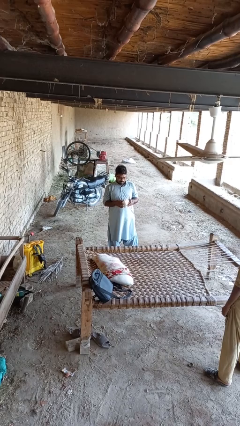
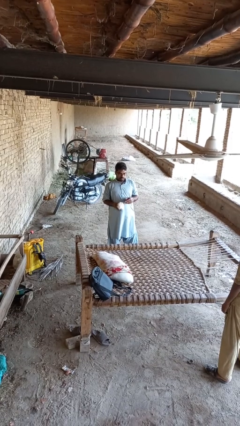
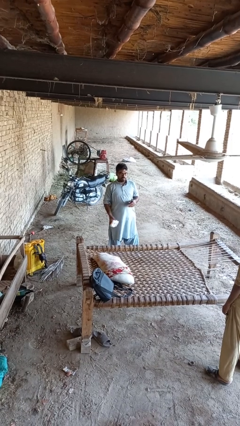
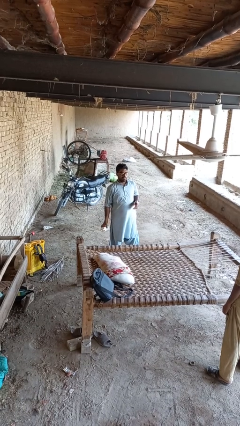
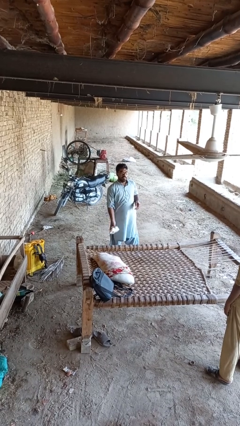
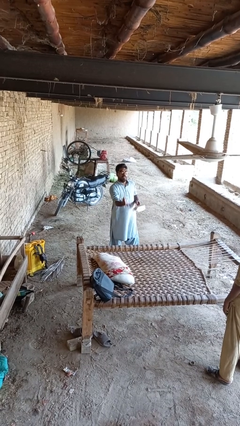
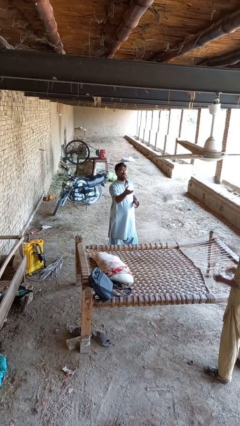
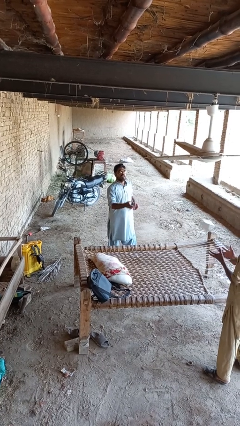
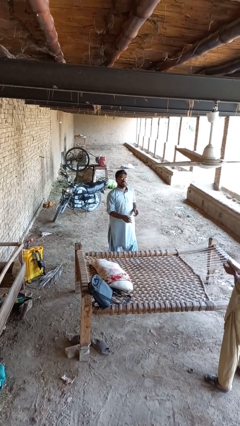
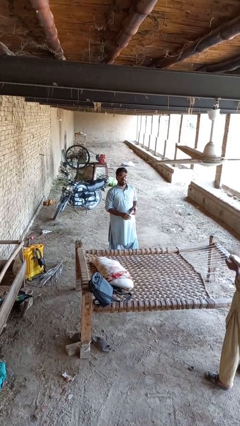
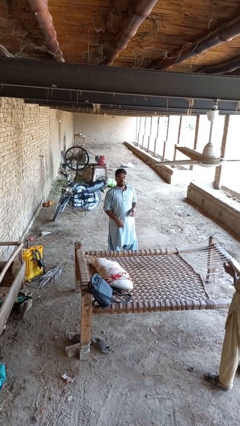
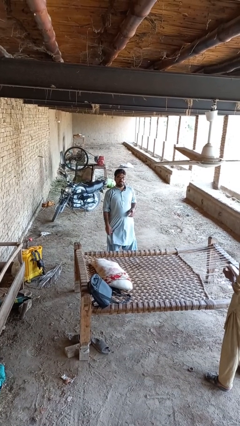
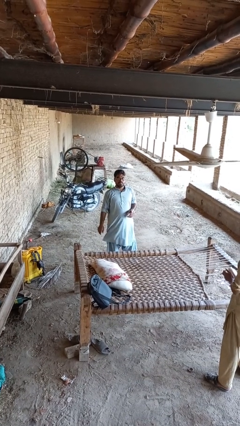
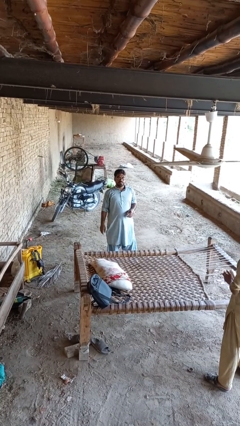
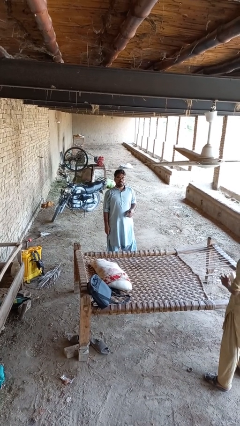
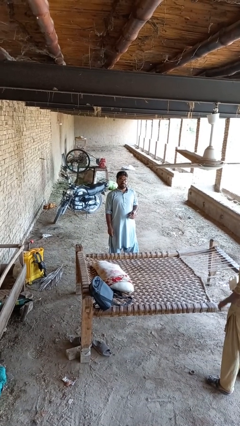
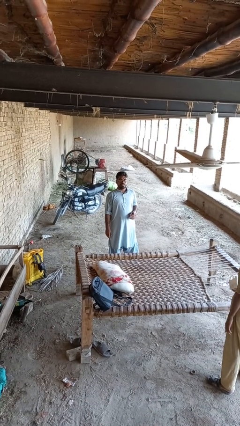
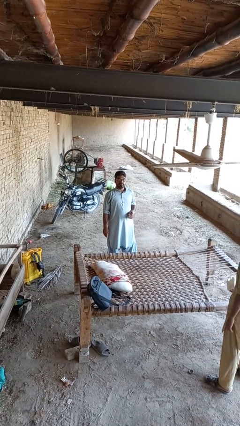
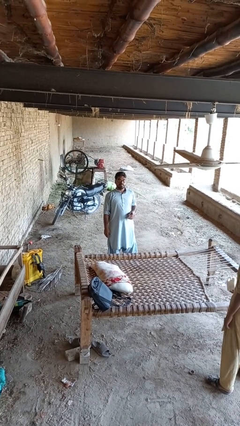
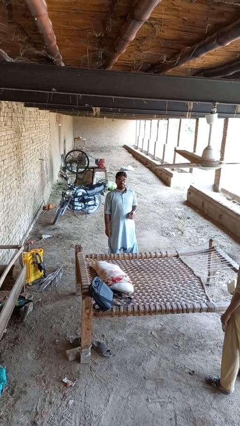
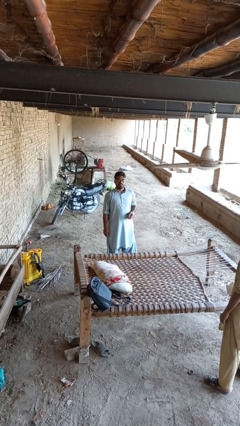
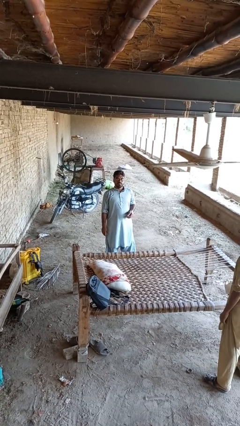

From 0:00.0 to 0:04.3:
person throws object to person

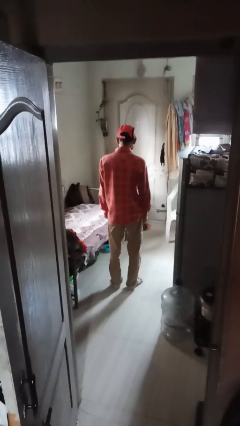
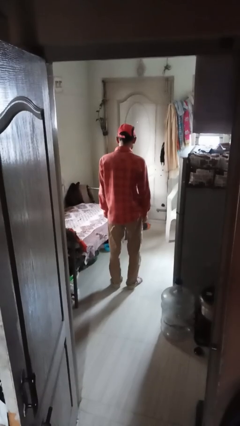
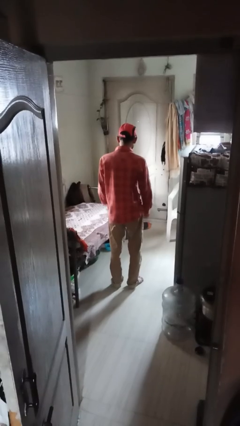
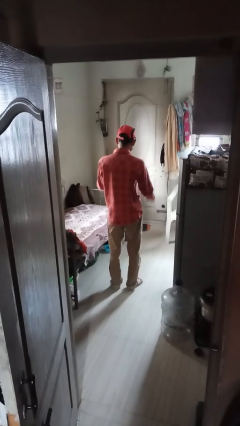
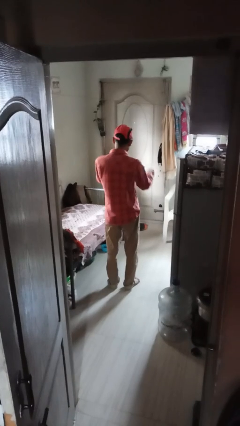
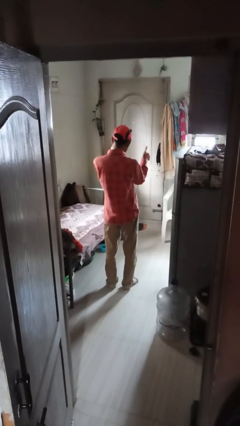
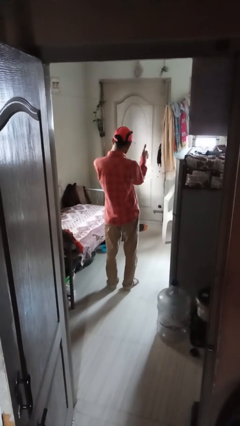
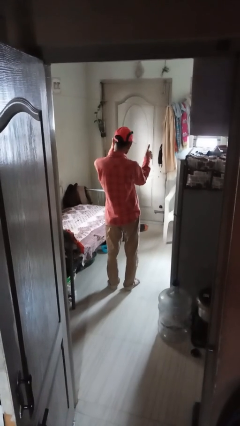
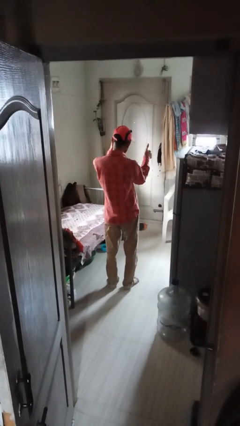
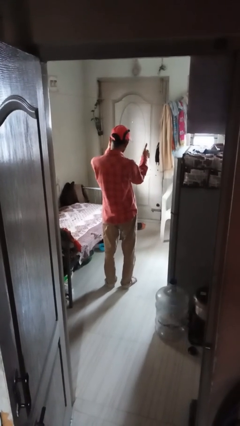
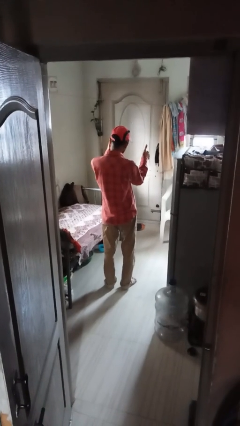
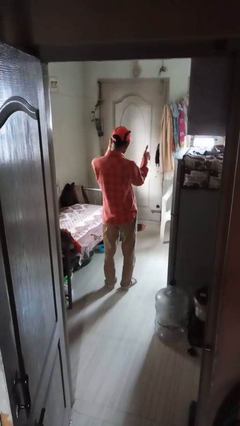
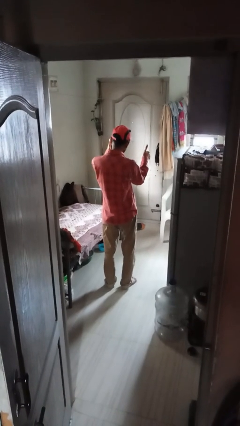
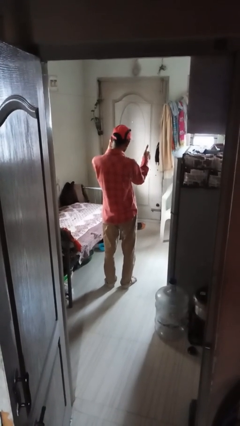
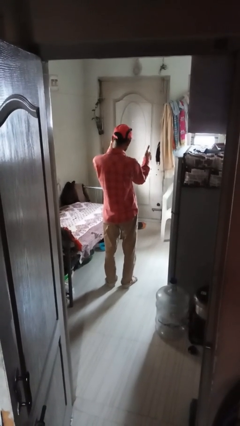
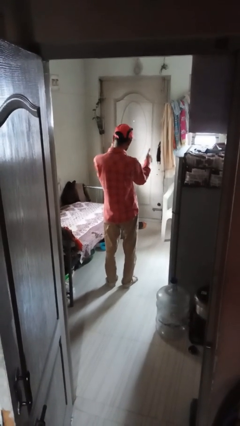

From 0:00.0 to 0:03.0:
person gestures thumbs up

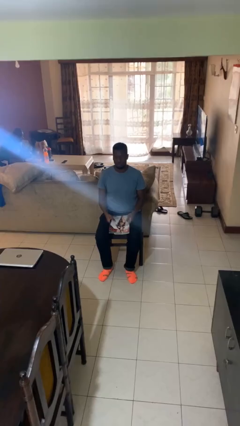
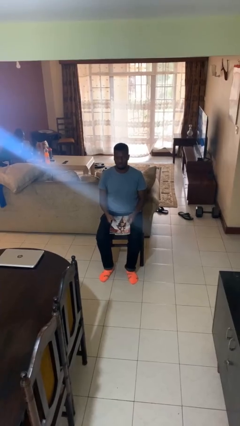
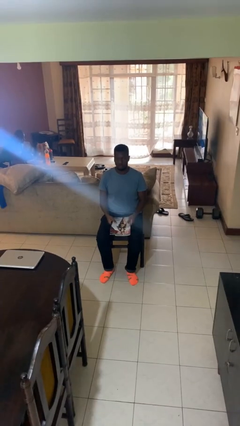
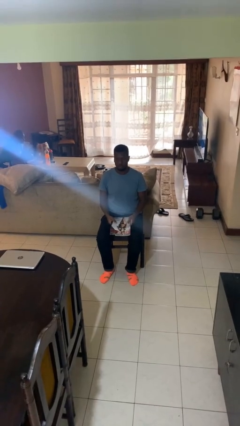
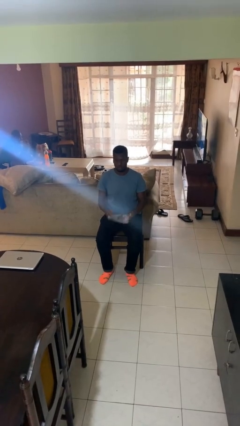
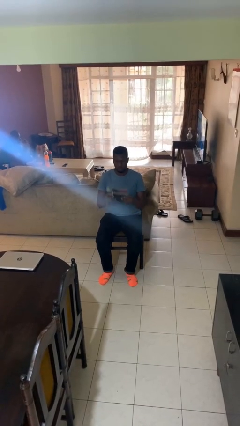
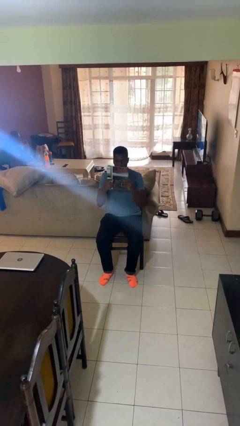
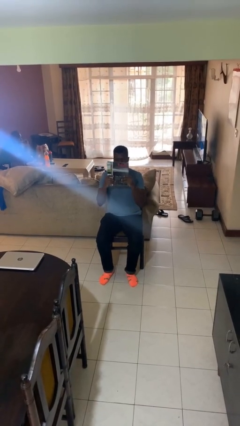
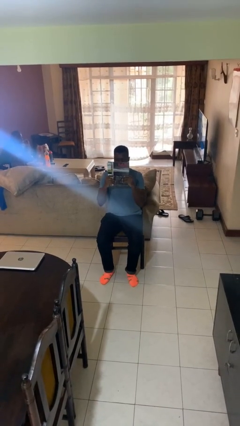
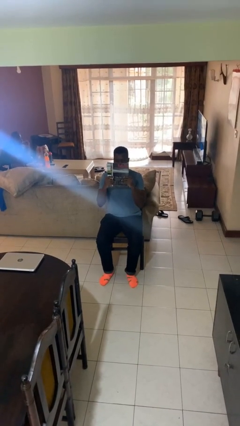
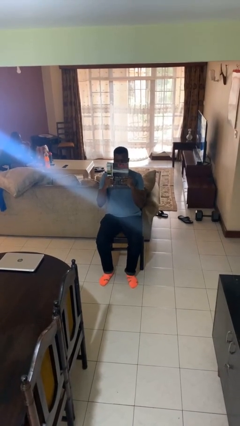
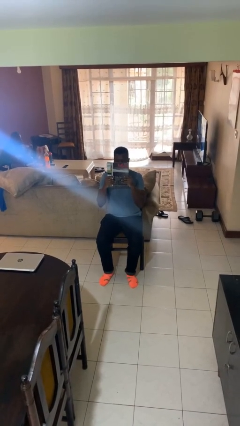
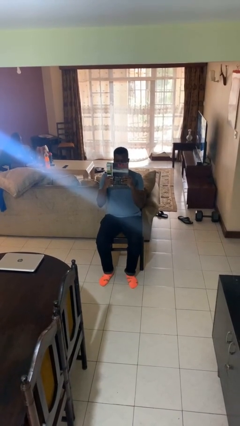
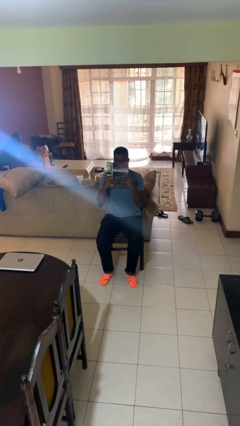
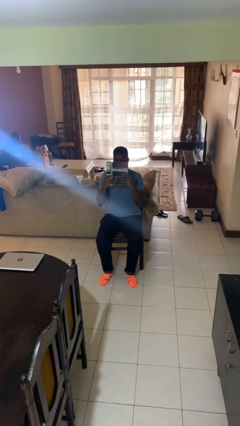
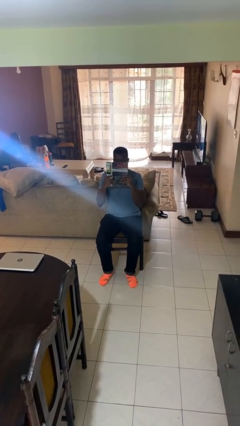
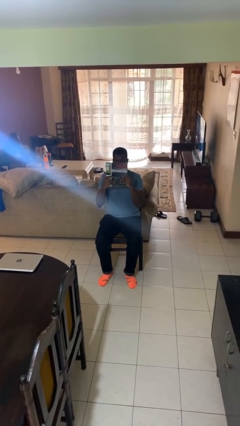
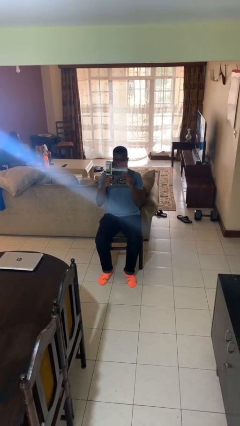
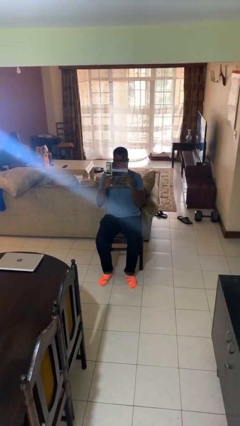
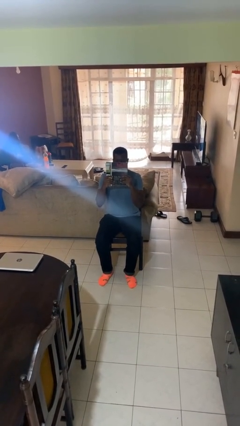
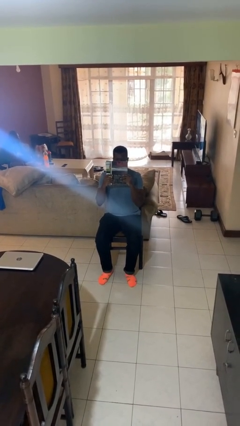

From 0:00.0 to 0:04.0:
person reads document

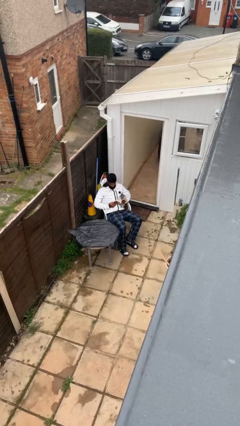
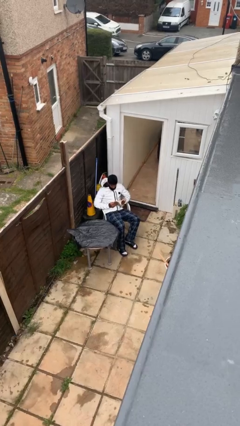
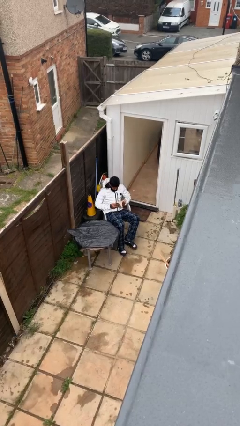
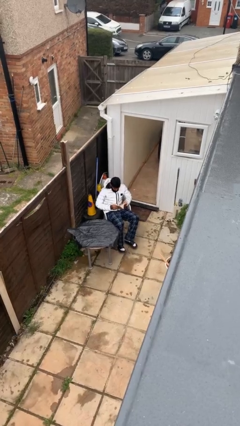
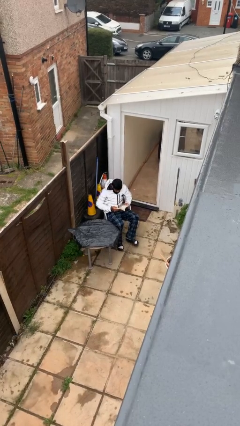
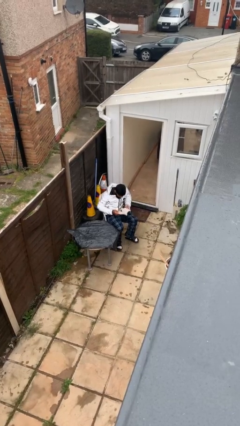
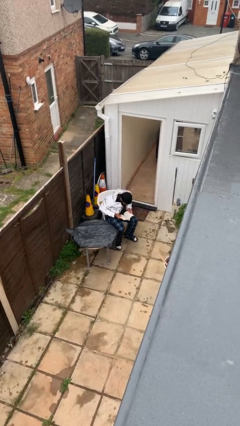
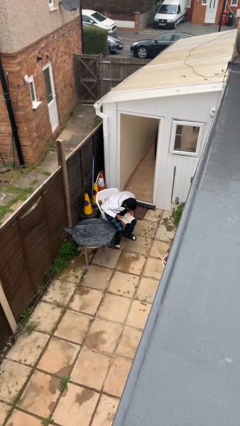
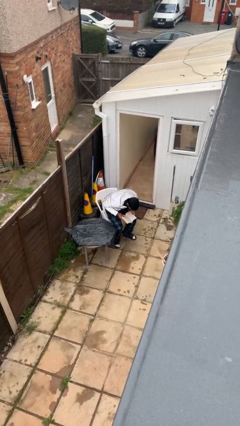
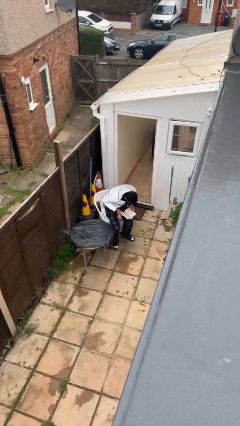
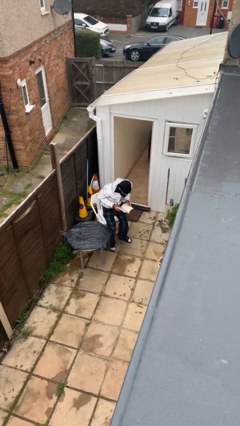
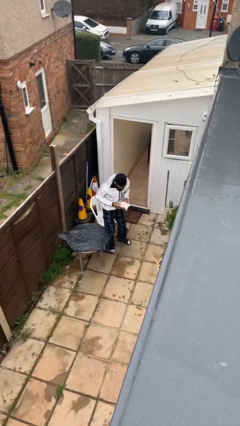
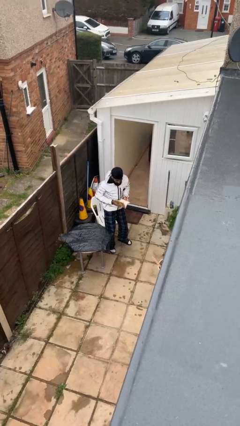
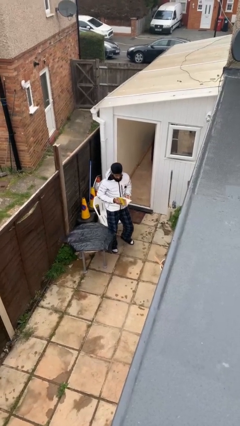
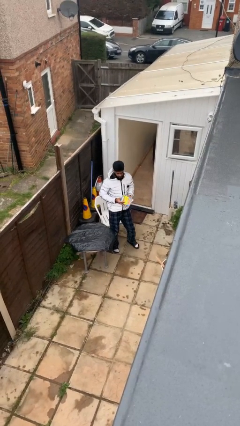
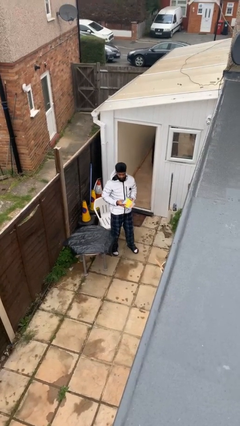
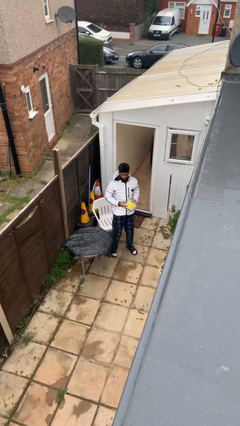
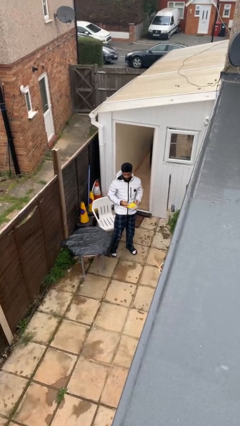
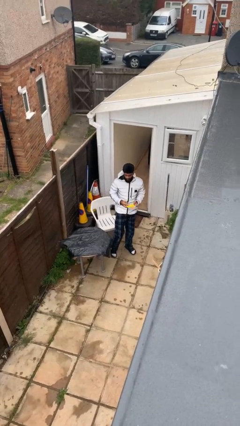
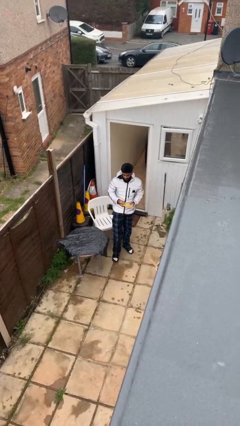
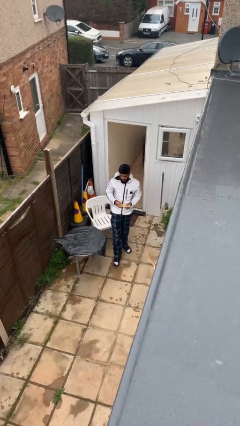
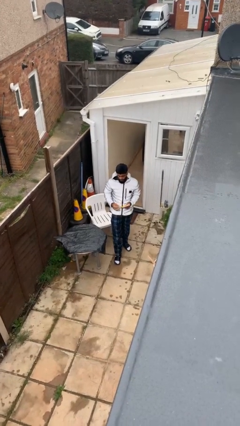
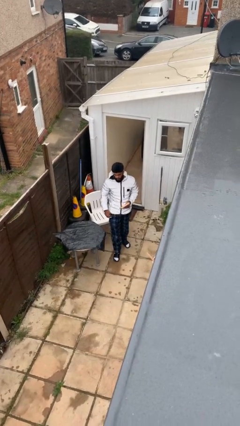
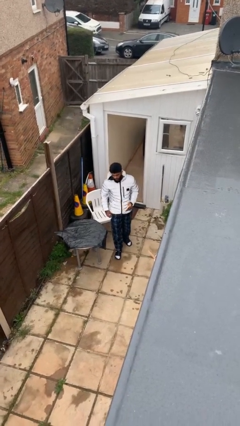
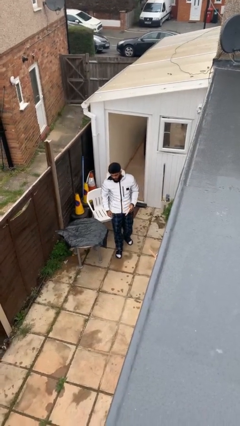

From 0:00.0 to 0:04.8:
person stands up

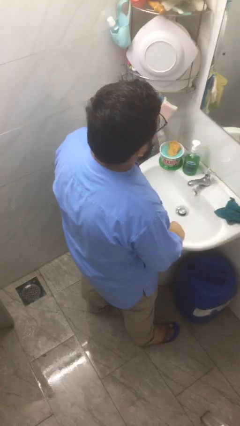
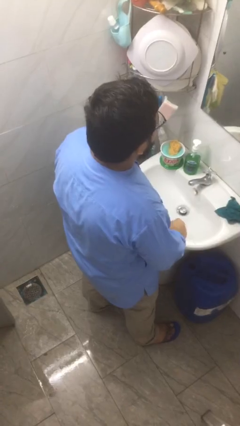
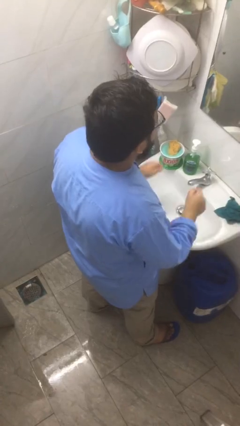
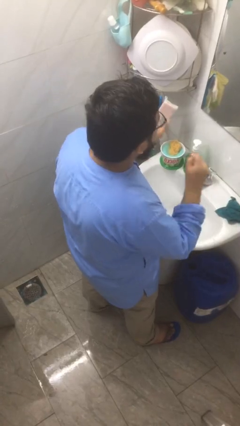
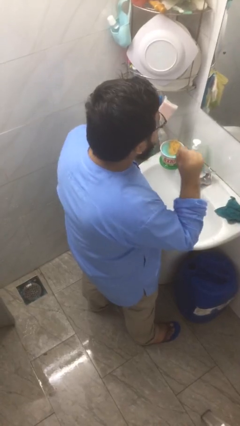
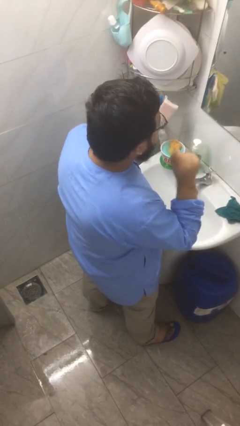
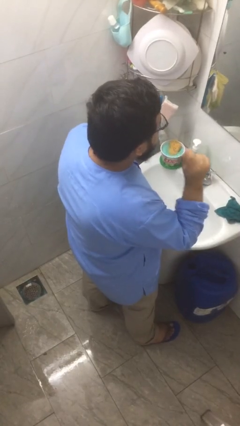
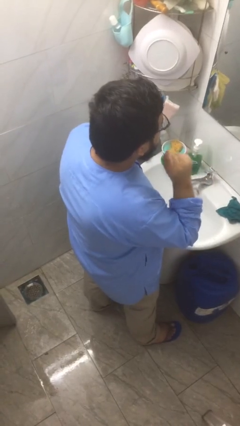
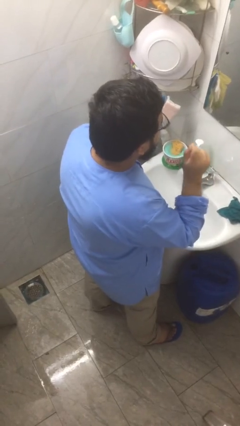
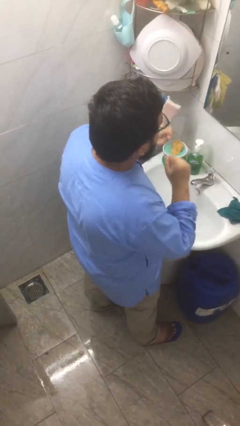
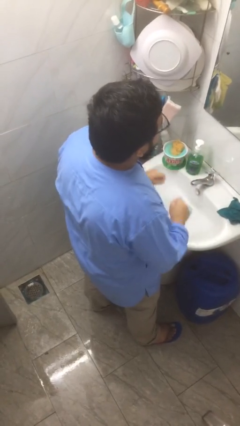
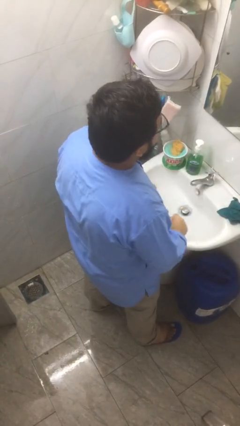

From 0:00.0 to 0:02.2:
person flosses
